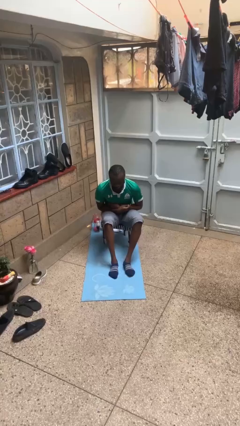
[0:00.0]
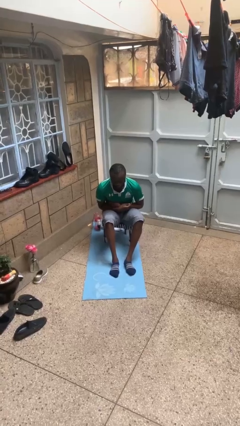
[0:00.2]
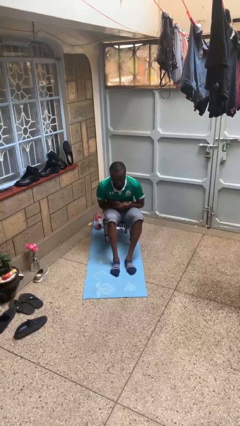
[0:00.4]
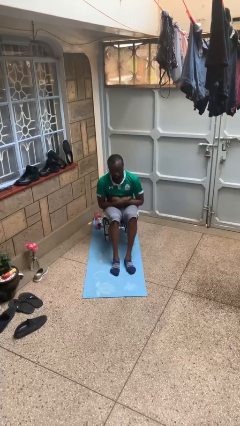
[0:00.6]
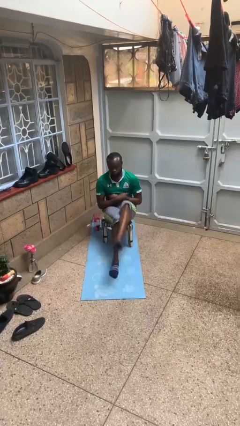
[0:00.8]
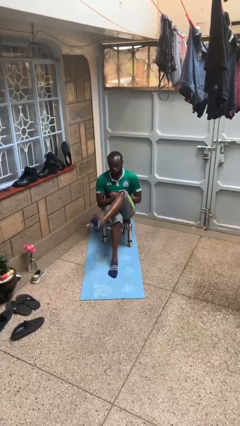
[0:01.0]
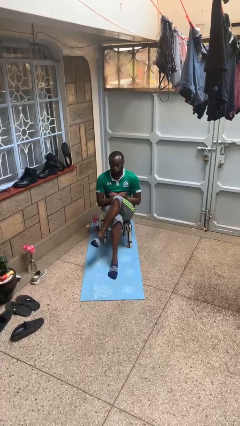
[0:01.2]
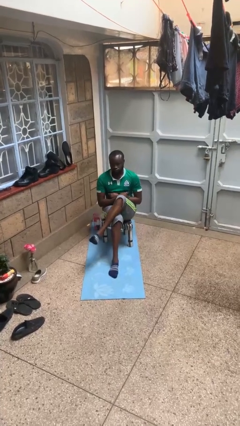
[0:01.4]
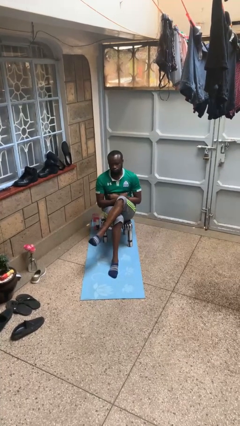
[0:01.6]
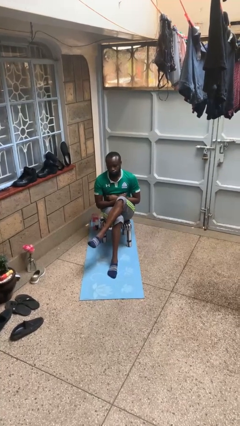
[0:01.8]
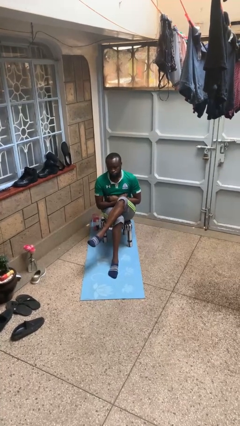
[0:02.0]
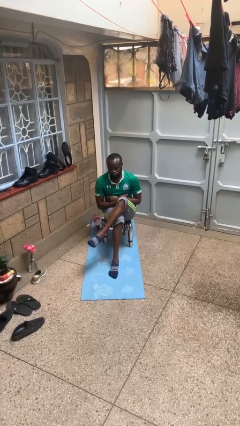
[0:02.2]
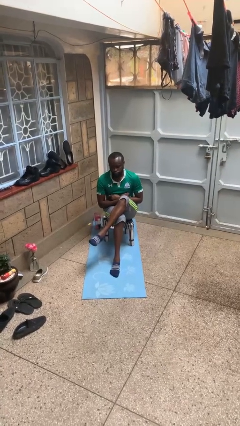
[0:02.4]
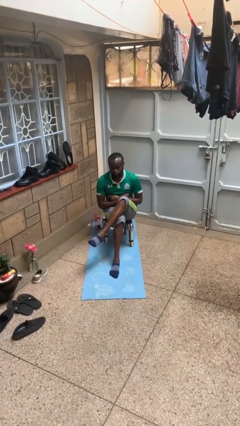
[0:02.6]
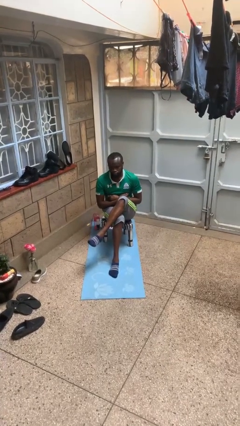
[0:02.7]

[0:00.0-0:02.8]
person crosses legs

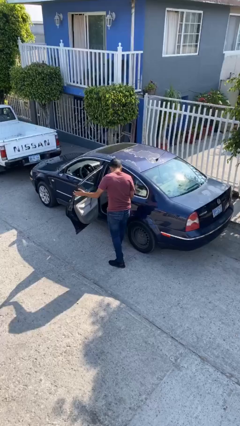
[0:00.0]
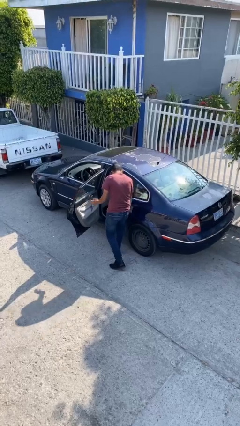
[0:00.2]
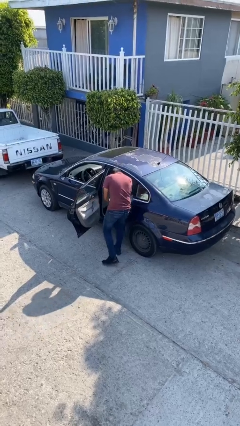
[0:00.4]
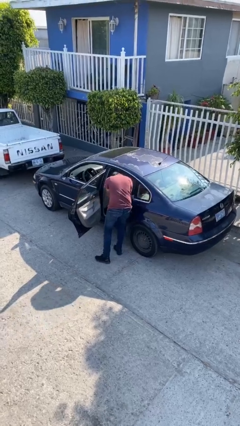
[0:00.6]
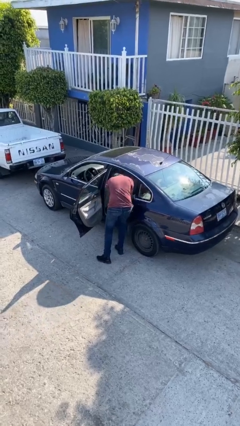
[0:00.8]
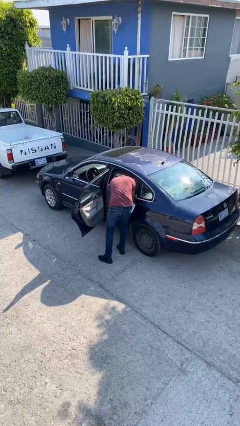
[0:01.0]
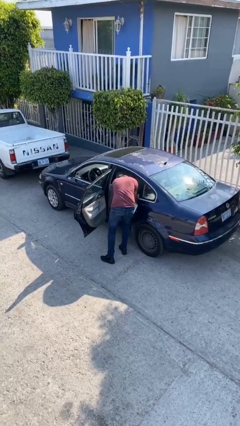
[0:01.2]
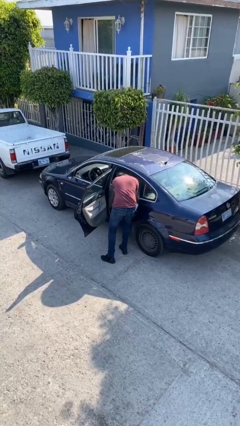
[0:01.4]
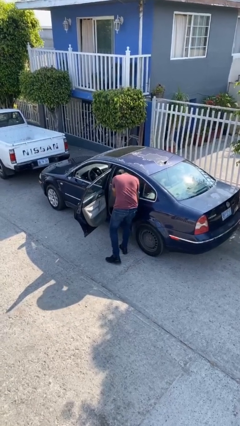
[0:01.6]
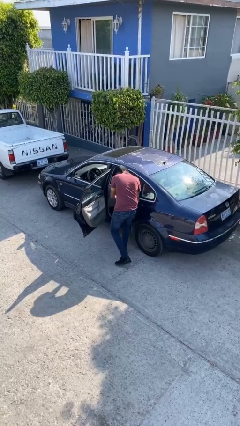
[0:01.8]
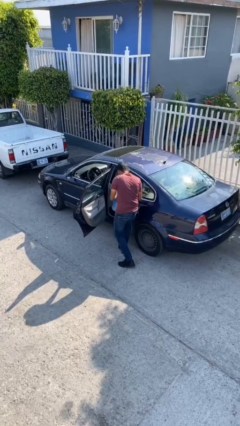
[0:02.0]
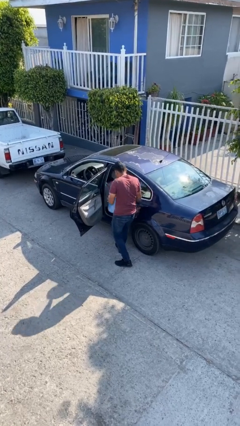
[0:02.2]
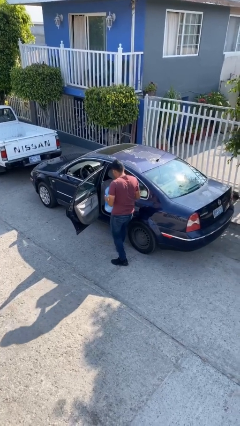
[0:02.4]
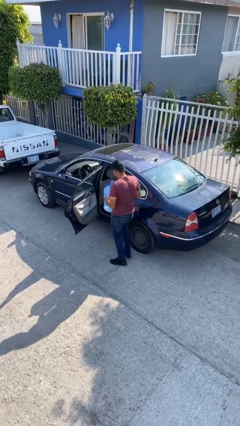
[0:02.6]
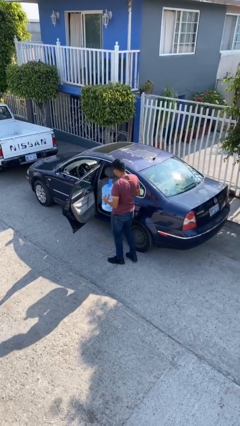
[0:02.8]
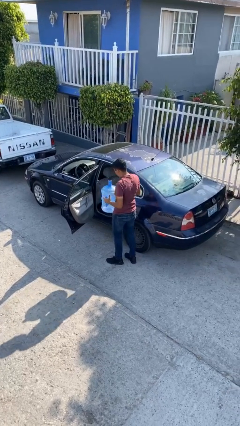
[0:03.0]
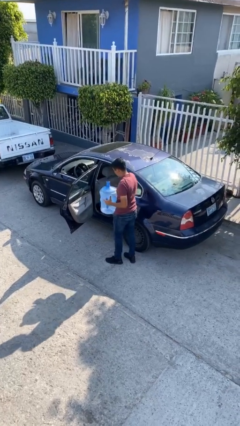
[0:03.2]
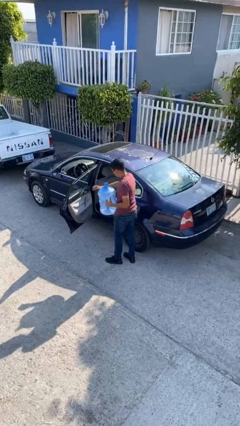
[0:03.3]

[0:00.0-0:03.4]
person unloads car

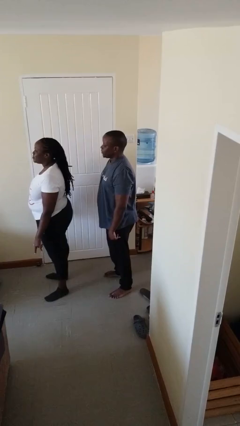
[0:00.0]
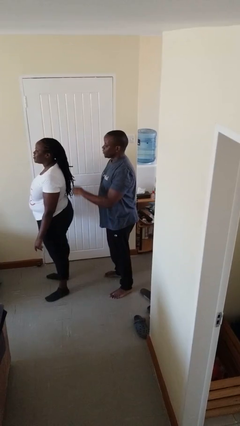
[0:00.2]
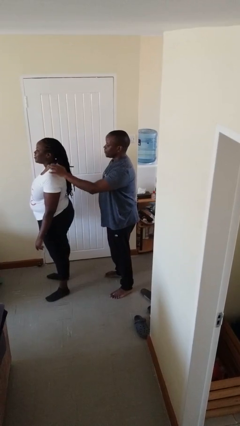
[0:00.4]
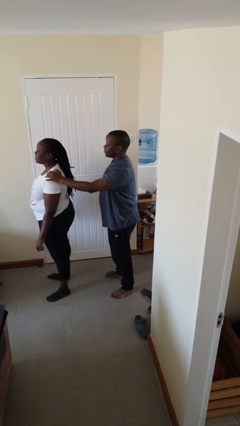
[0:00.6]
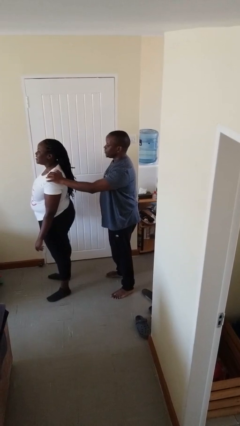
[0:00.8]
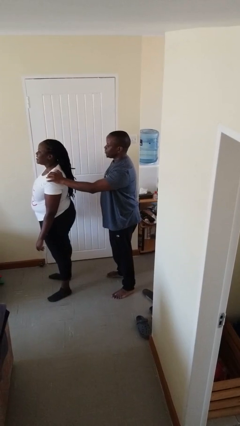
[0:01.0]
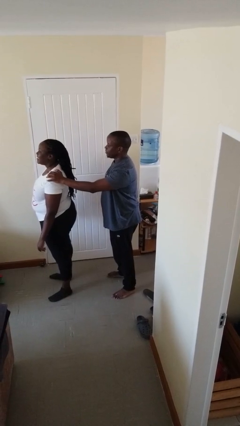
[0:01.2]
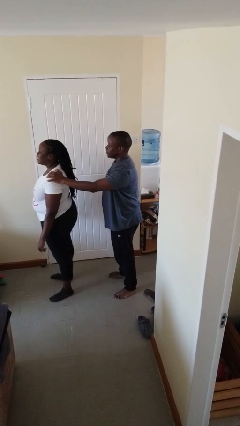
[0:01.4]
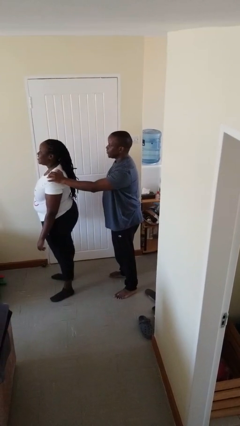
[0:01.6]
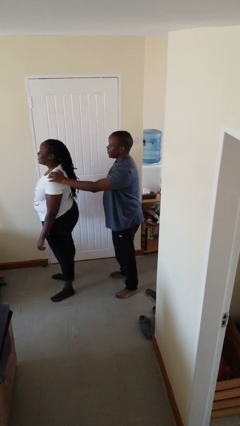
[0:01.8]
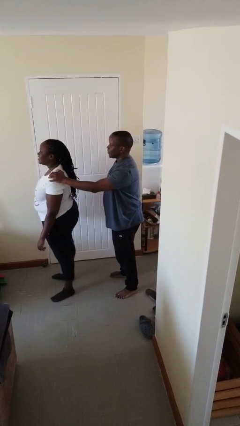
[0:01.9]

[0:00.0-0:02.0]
person grabs person by shoulder

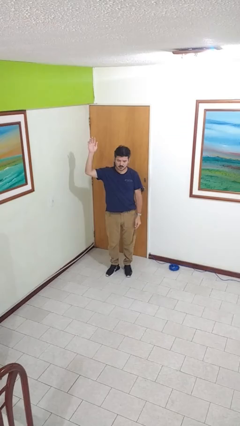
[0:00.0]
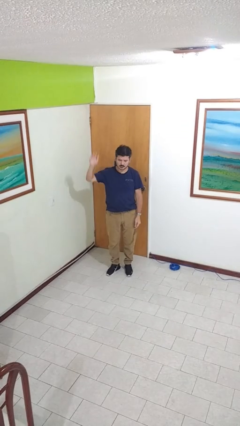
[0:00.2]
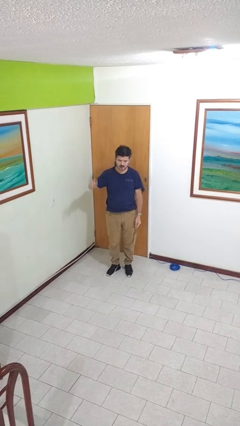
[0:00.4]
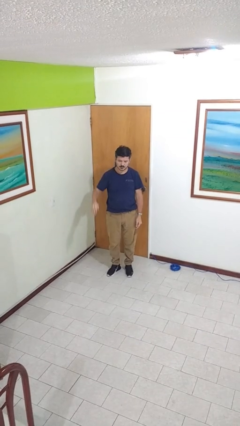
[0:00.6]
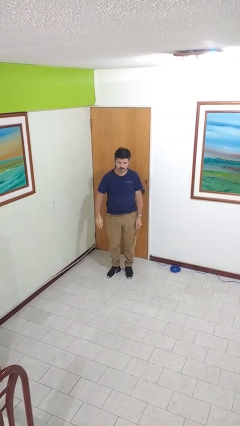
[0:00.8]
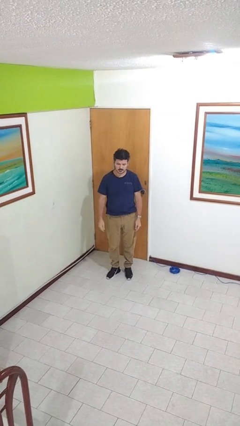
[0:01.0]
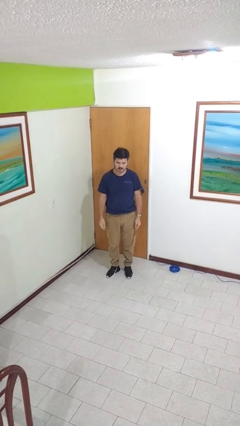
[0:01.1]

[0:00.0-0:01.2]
person gestures lower hand

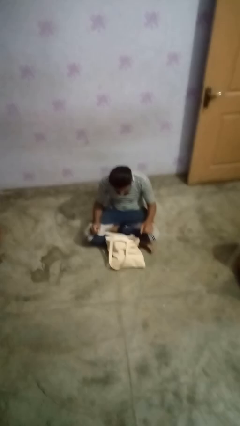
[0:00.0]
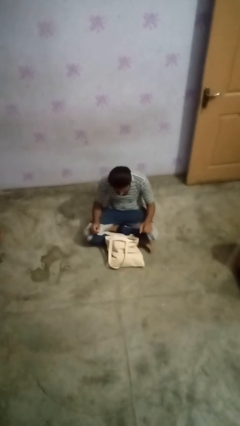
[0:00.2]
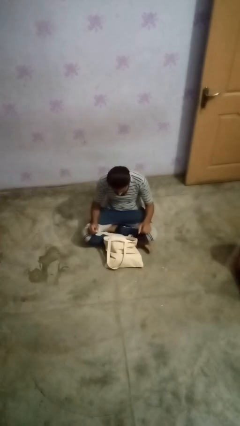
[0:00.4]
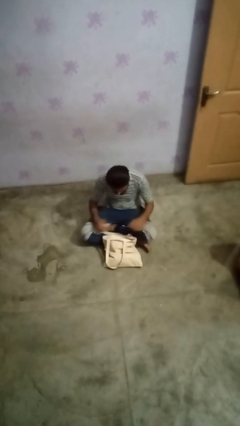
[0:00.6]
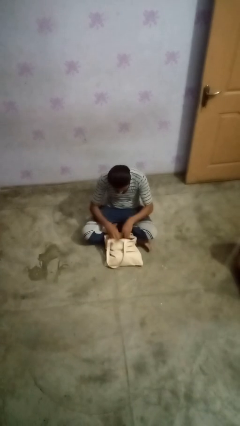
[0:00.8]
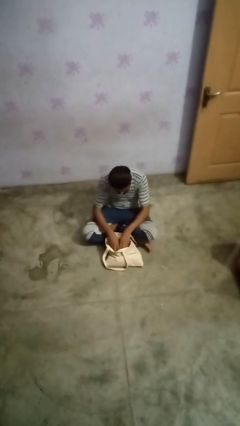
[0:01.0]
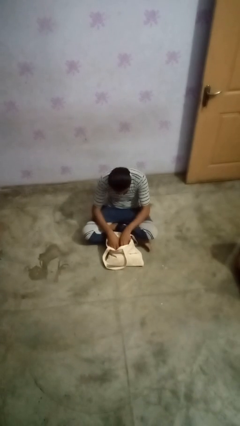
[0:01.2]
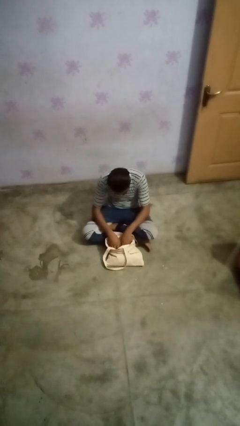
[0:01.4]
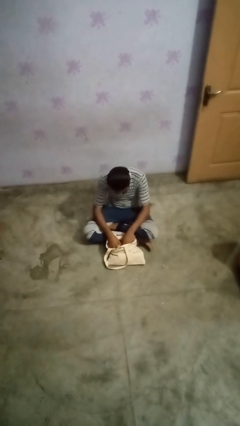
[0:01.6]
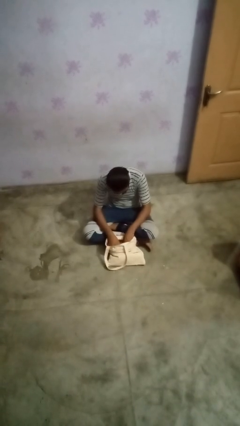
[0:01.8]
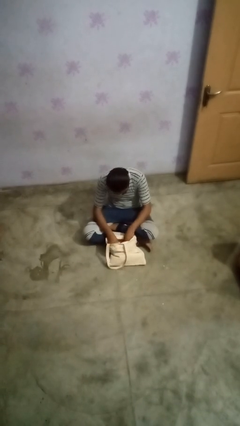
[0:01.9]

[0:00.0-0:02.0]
person searches in bag

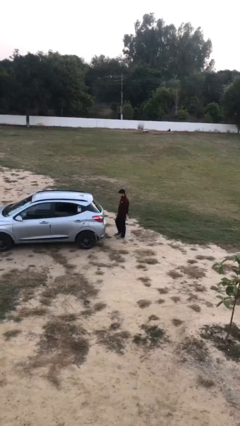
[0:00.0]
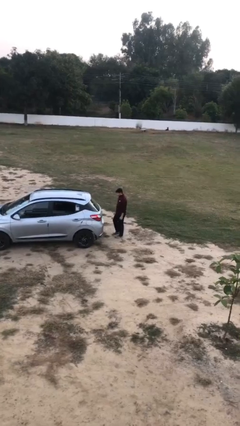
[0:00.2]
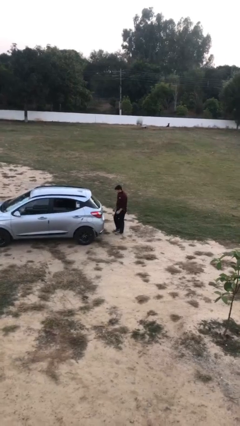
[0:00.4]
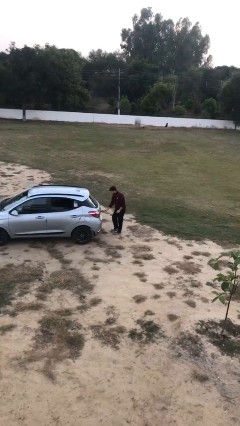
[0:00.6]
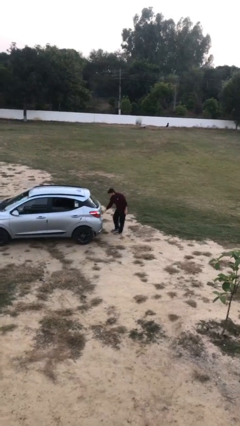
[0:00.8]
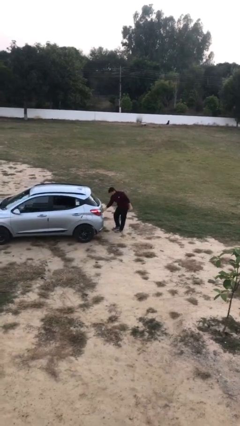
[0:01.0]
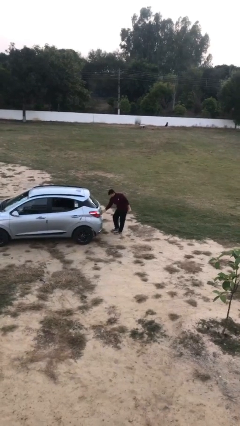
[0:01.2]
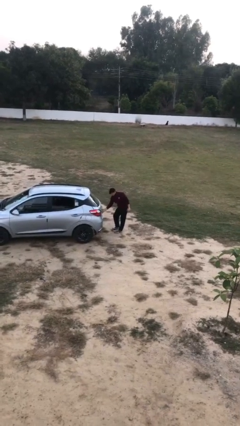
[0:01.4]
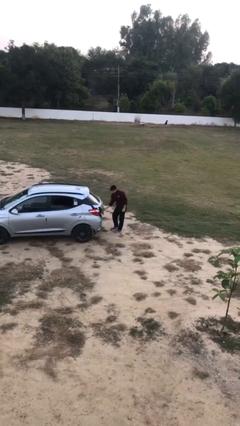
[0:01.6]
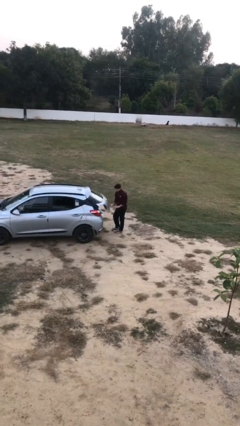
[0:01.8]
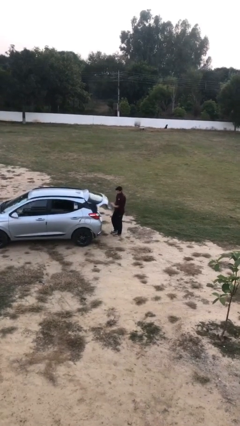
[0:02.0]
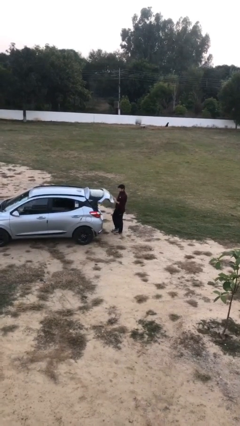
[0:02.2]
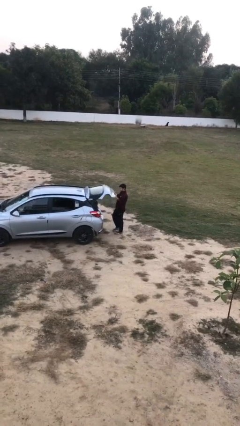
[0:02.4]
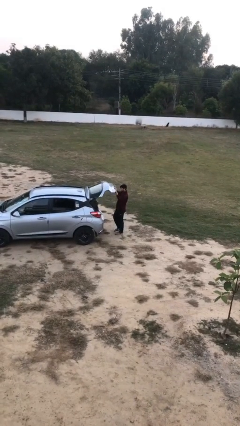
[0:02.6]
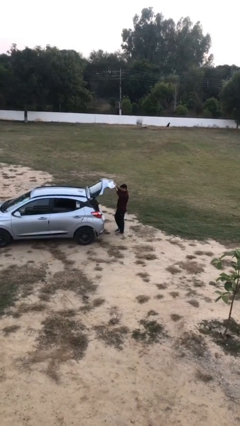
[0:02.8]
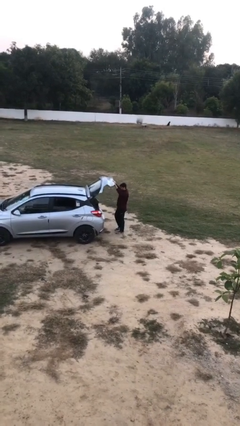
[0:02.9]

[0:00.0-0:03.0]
person opens car trunk

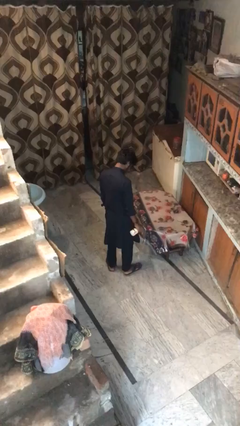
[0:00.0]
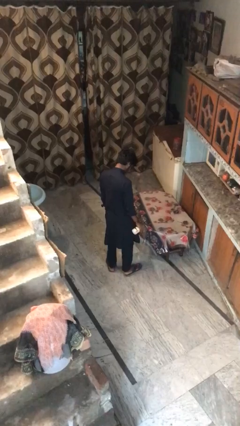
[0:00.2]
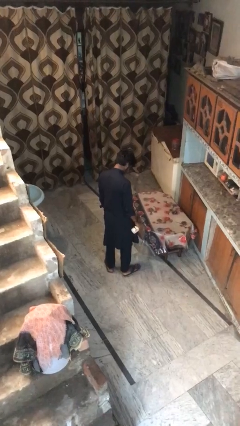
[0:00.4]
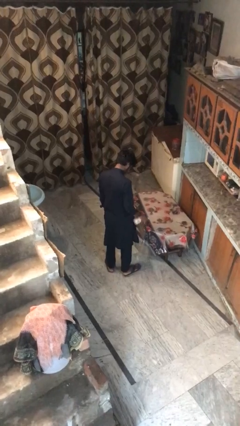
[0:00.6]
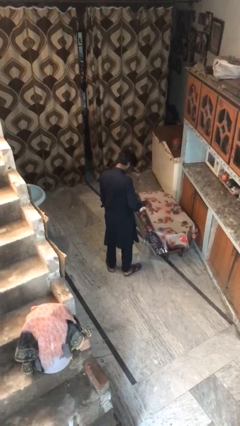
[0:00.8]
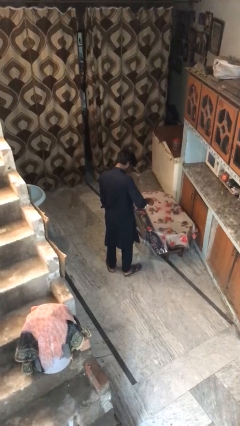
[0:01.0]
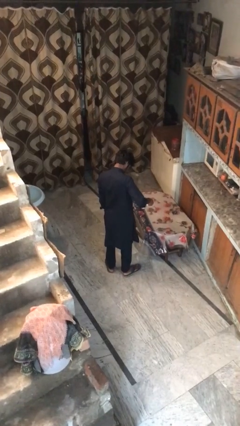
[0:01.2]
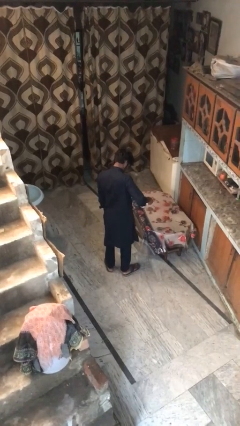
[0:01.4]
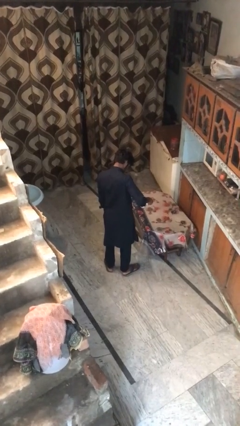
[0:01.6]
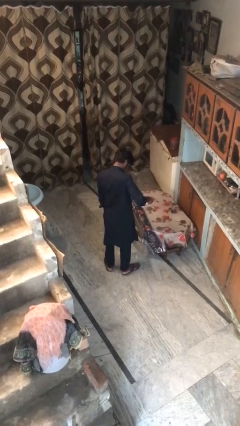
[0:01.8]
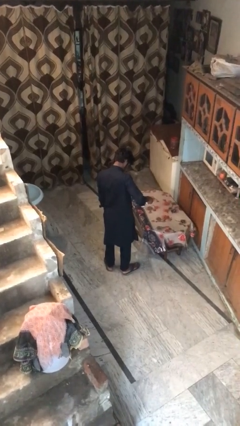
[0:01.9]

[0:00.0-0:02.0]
person sprays from bottle

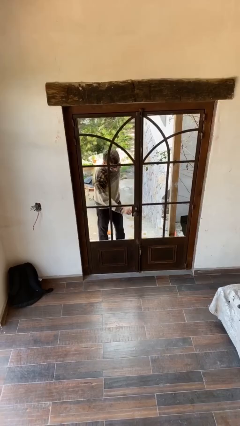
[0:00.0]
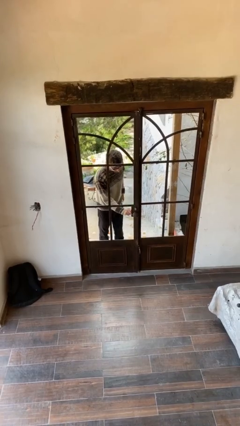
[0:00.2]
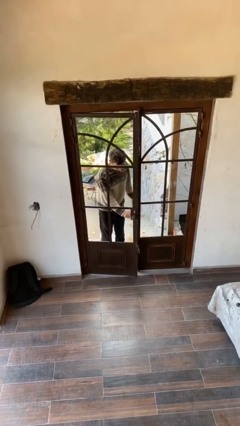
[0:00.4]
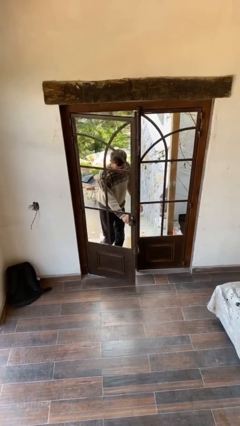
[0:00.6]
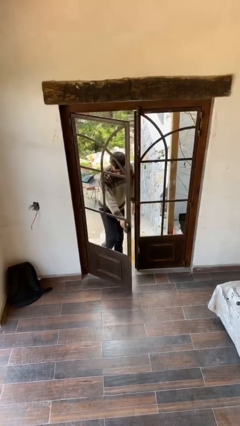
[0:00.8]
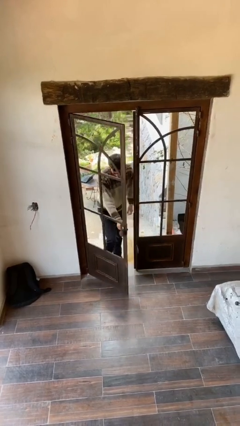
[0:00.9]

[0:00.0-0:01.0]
person opens facility door
